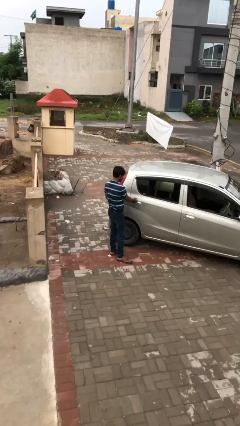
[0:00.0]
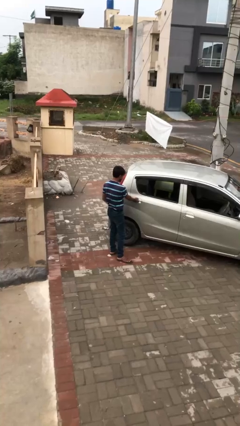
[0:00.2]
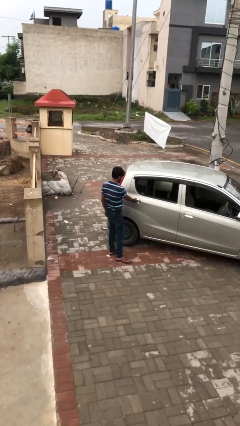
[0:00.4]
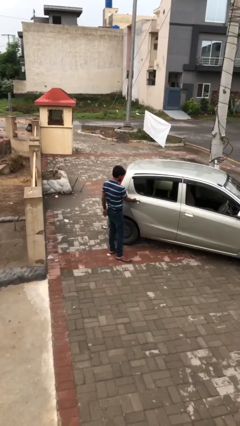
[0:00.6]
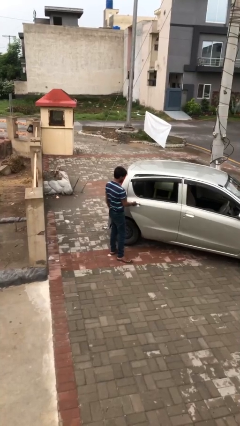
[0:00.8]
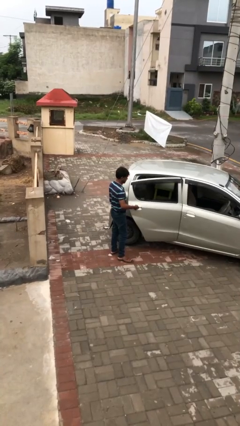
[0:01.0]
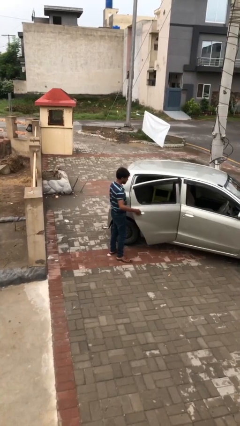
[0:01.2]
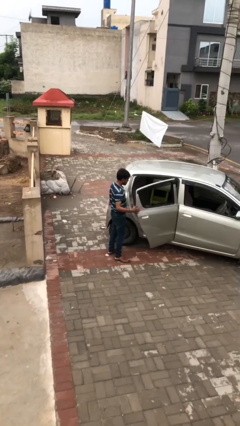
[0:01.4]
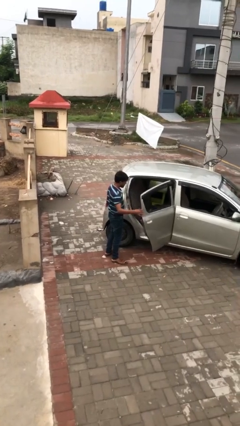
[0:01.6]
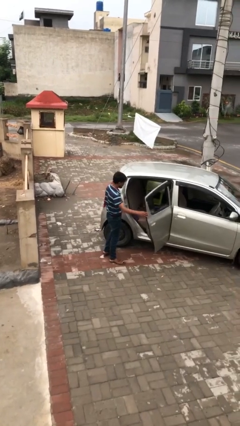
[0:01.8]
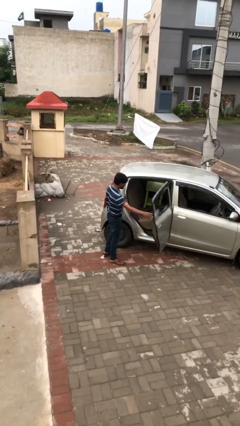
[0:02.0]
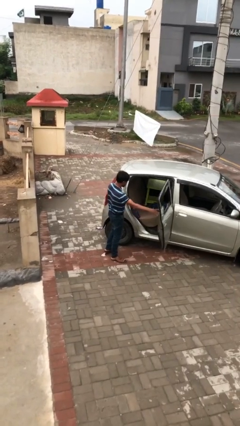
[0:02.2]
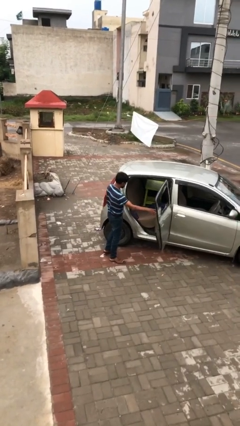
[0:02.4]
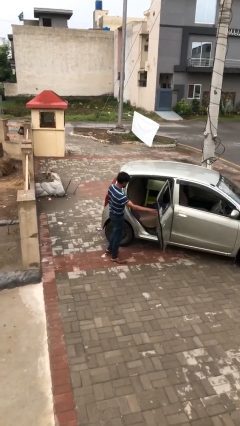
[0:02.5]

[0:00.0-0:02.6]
person opens car door

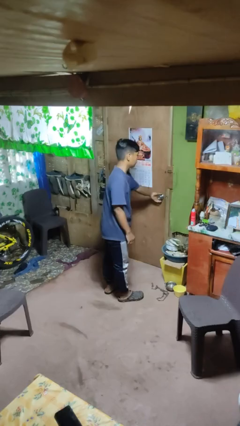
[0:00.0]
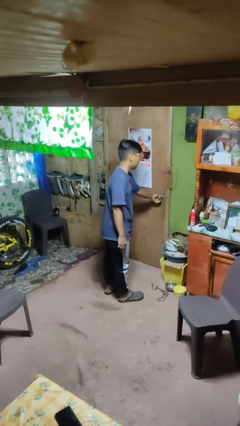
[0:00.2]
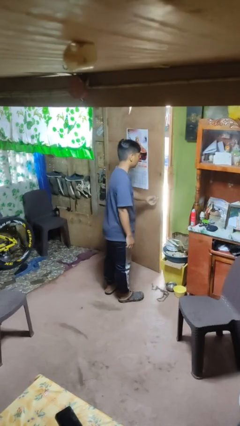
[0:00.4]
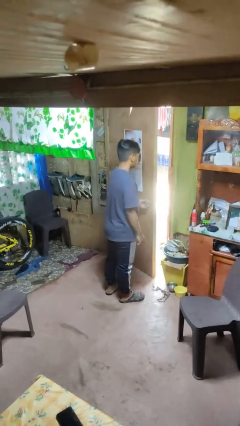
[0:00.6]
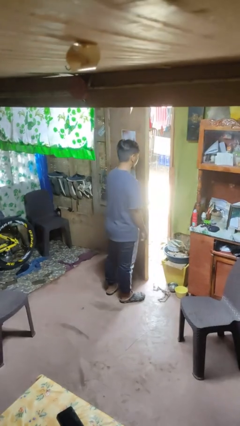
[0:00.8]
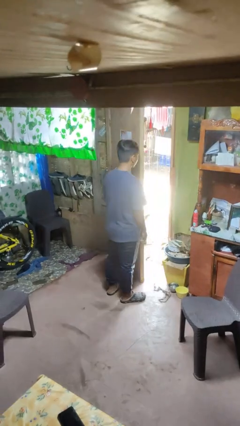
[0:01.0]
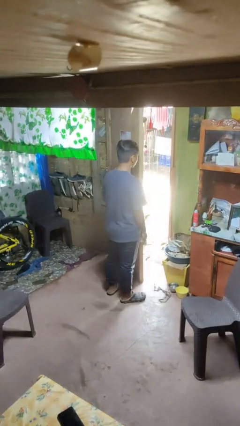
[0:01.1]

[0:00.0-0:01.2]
person opens facility door

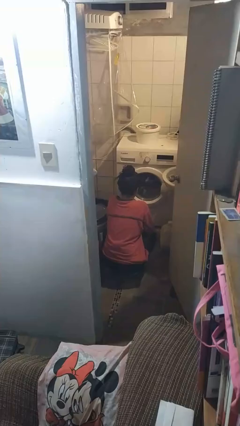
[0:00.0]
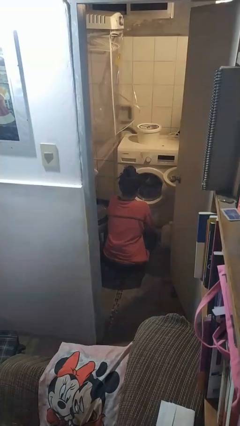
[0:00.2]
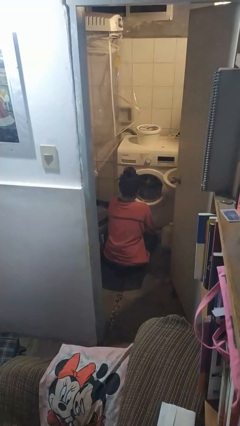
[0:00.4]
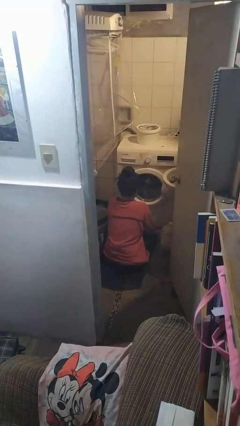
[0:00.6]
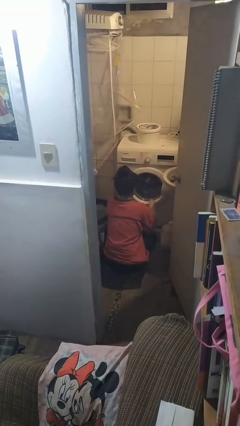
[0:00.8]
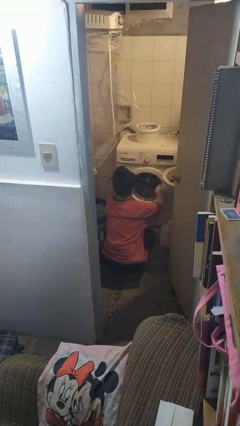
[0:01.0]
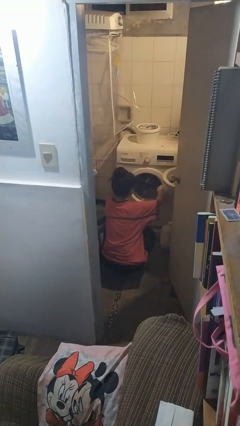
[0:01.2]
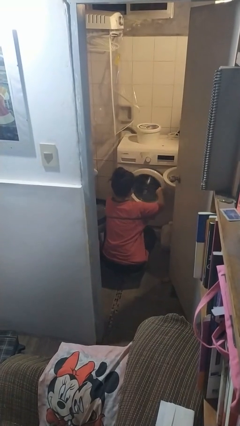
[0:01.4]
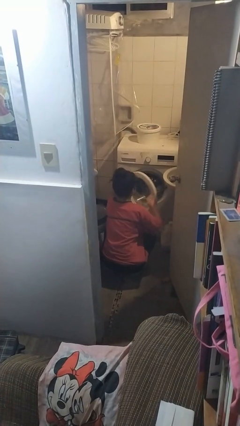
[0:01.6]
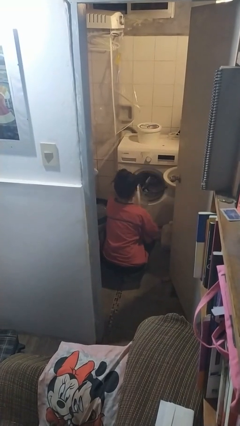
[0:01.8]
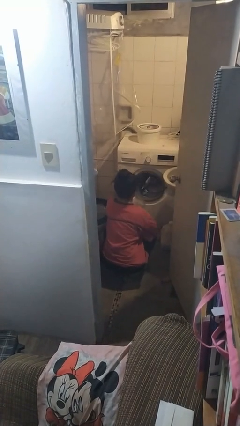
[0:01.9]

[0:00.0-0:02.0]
person opens clothes washer

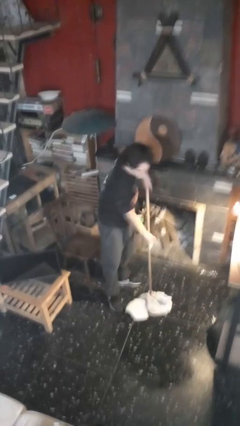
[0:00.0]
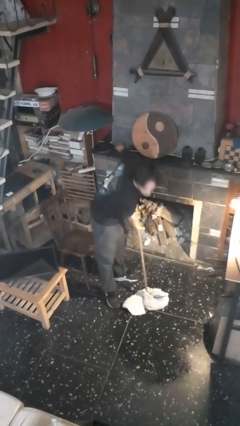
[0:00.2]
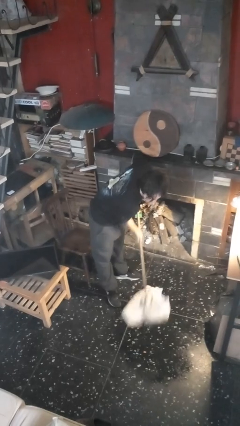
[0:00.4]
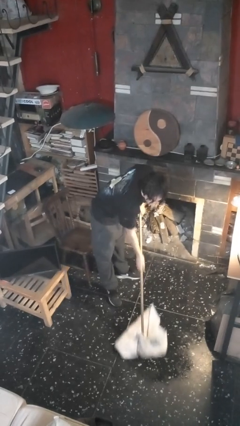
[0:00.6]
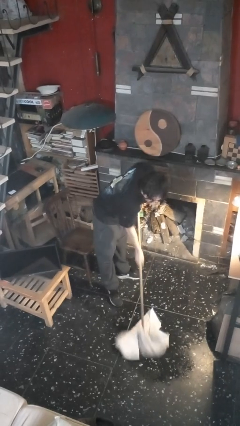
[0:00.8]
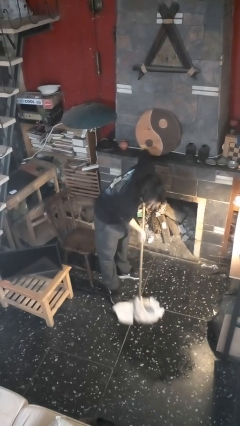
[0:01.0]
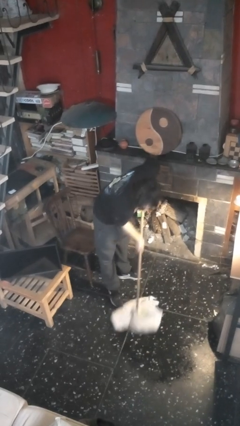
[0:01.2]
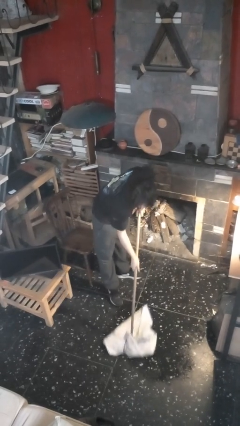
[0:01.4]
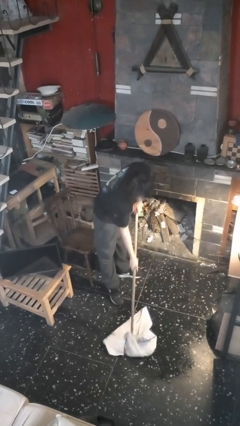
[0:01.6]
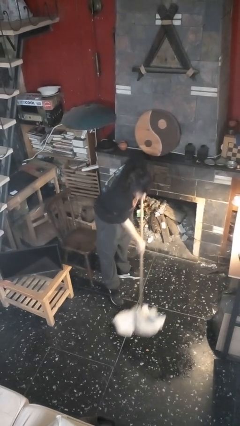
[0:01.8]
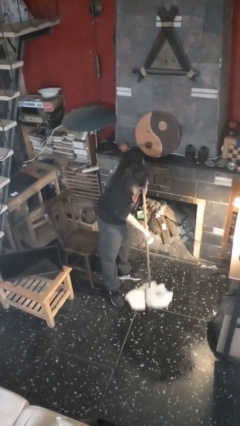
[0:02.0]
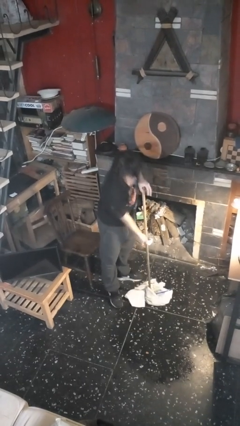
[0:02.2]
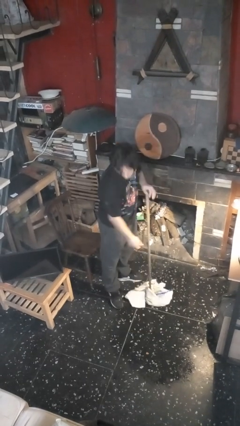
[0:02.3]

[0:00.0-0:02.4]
person mops

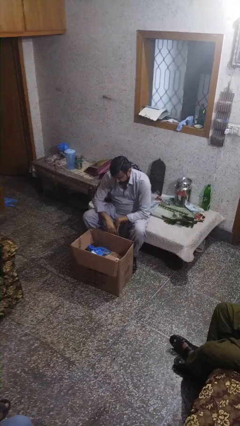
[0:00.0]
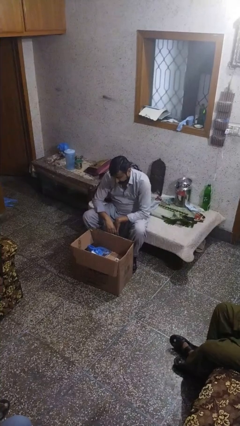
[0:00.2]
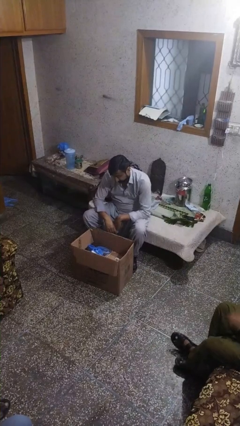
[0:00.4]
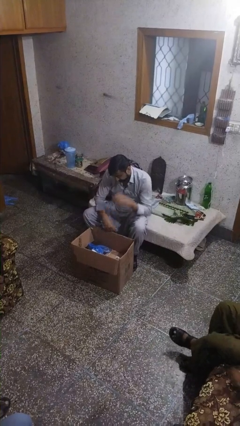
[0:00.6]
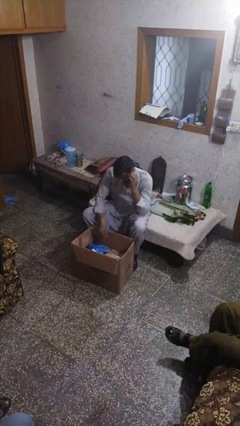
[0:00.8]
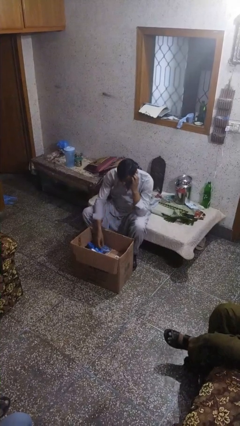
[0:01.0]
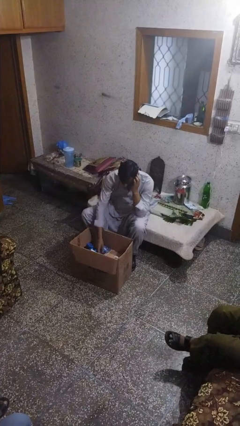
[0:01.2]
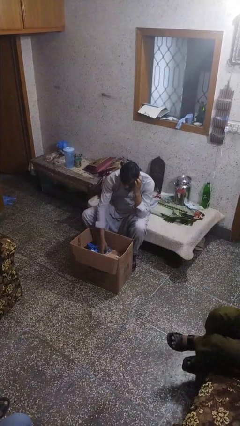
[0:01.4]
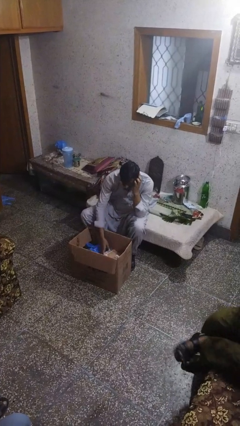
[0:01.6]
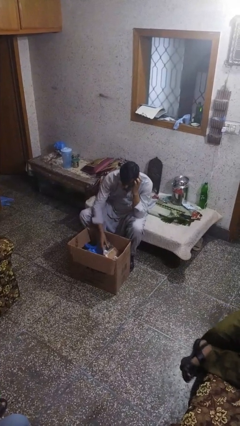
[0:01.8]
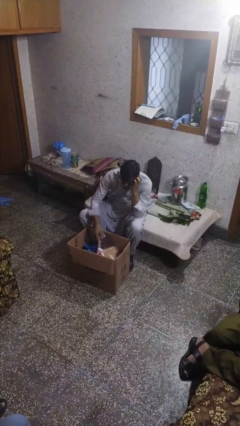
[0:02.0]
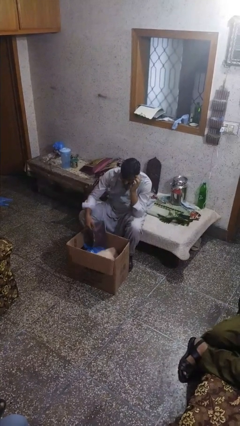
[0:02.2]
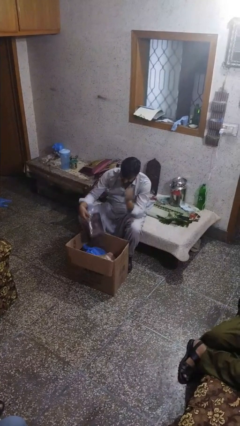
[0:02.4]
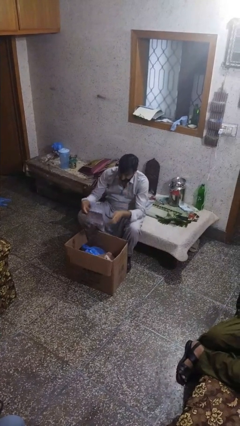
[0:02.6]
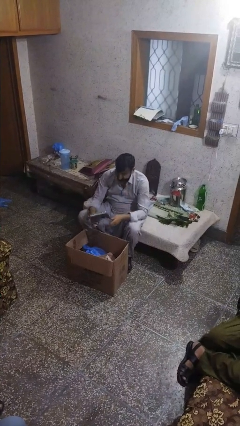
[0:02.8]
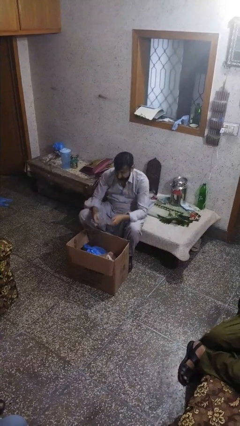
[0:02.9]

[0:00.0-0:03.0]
person takes object from box

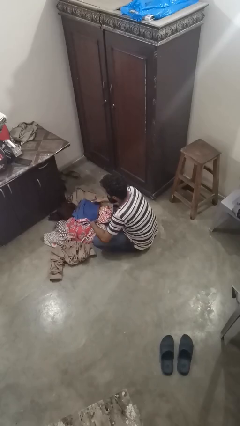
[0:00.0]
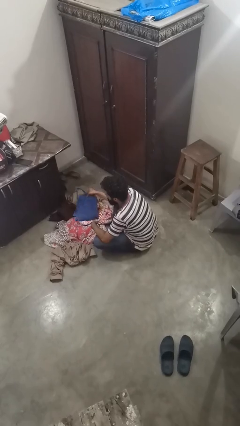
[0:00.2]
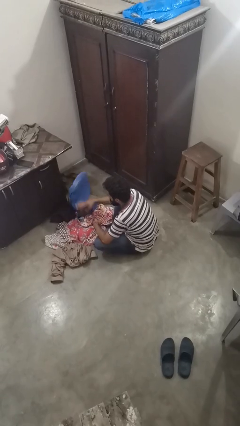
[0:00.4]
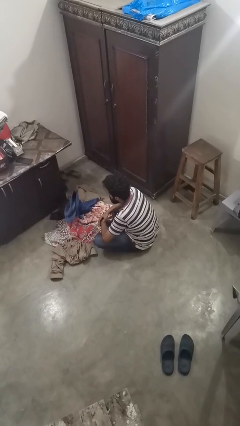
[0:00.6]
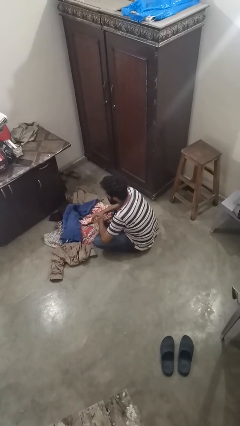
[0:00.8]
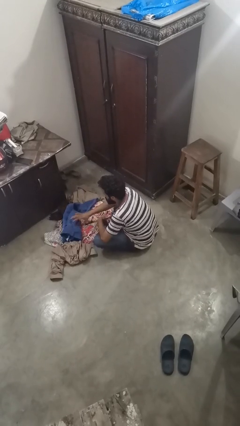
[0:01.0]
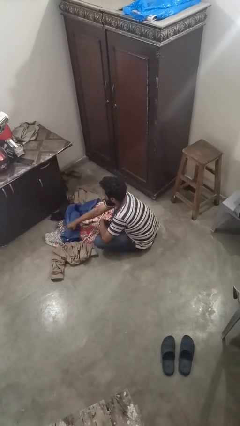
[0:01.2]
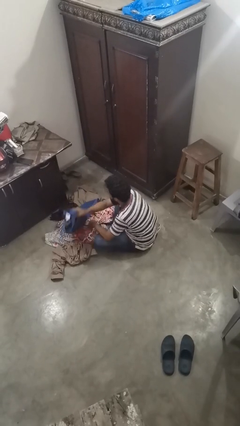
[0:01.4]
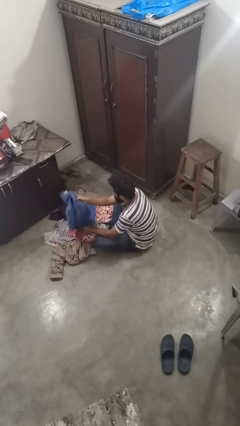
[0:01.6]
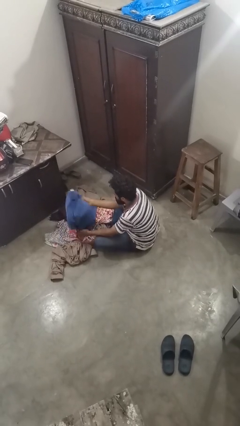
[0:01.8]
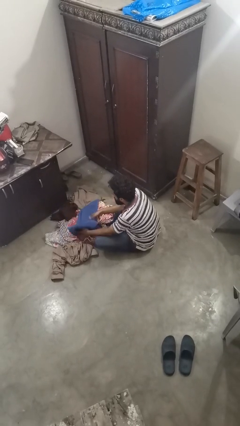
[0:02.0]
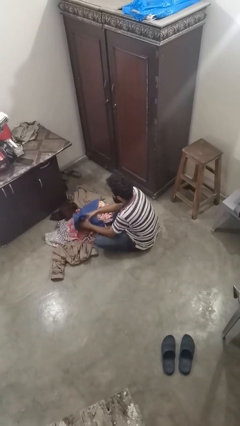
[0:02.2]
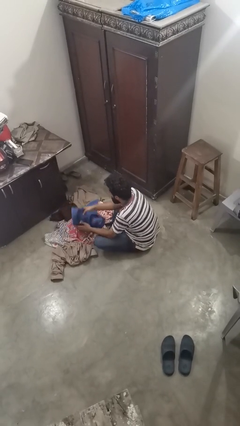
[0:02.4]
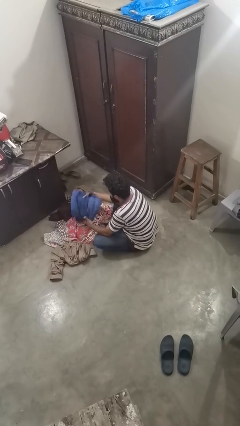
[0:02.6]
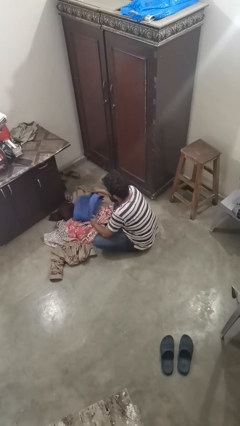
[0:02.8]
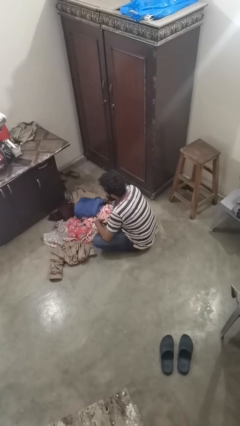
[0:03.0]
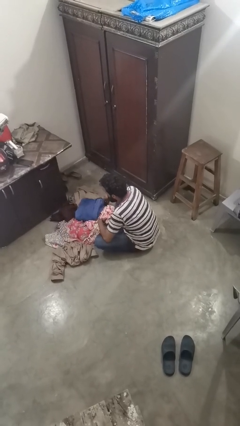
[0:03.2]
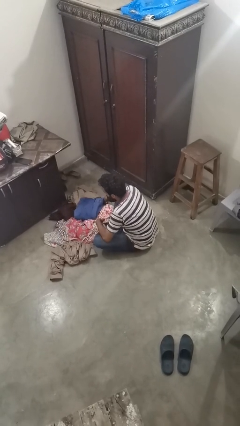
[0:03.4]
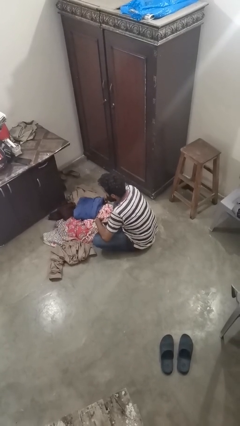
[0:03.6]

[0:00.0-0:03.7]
person folds pants

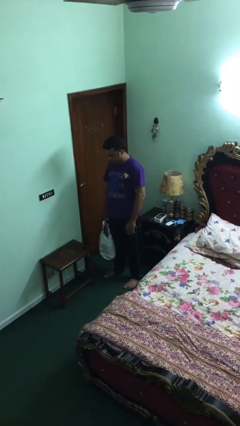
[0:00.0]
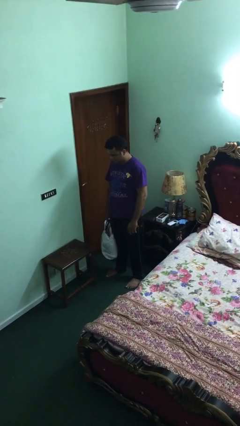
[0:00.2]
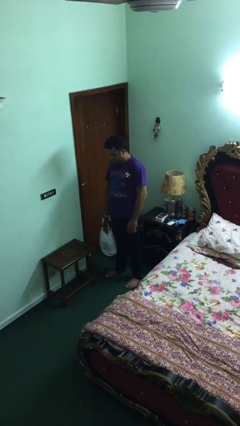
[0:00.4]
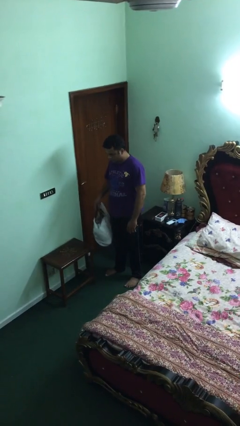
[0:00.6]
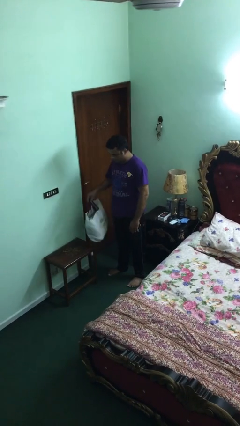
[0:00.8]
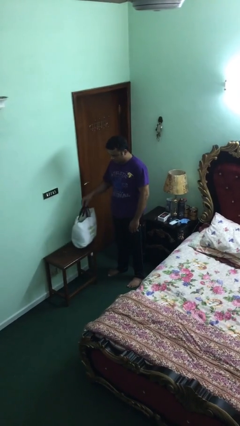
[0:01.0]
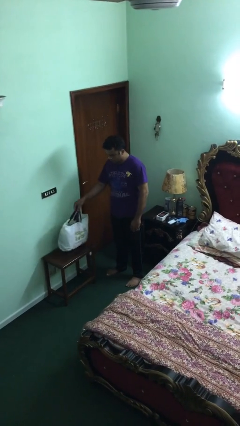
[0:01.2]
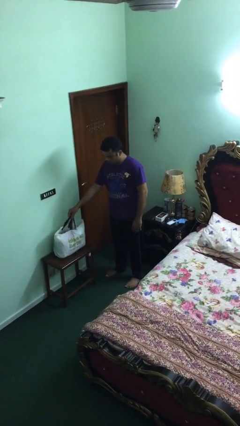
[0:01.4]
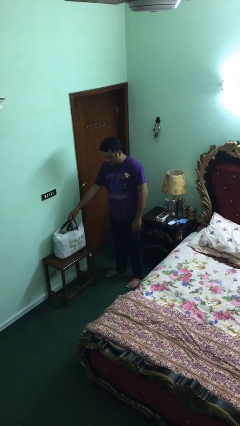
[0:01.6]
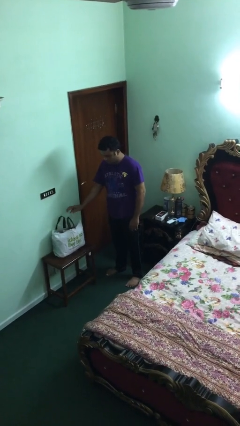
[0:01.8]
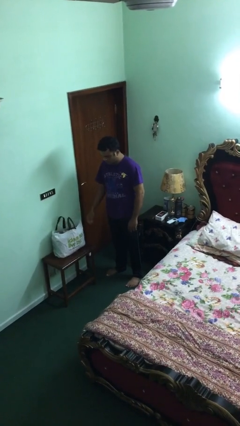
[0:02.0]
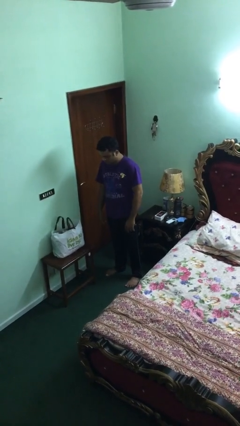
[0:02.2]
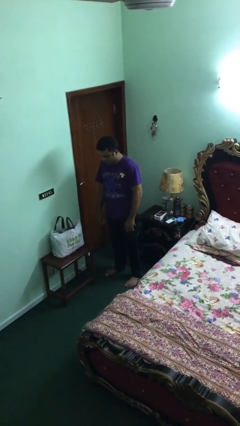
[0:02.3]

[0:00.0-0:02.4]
person puts down object on table
